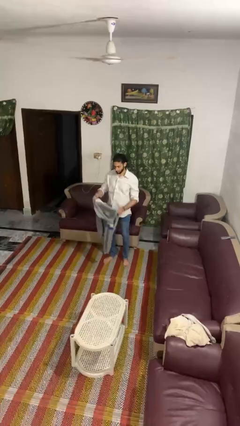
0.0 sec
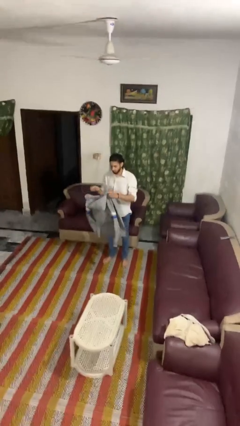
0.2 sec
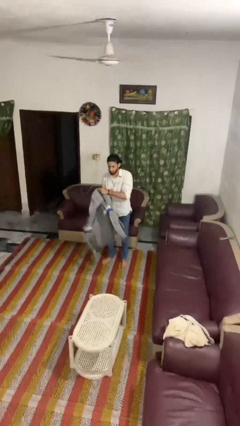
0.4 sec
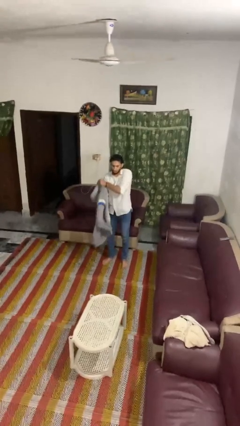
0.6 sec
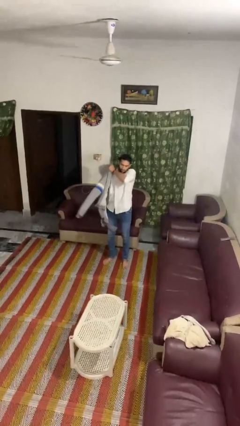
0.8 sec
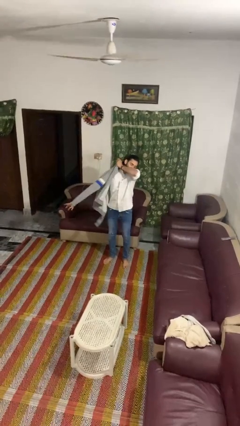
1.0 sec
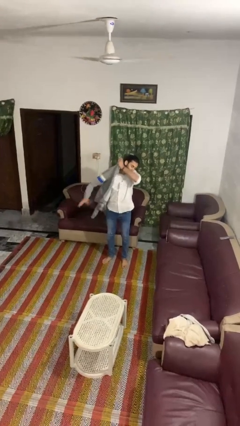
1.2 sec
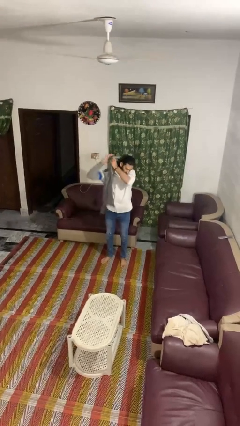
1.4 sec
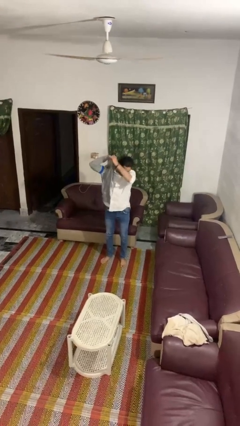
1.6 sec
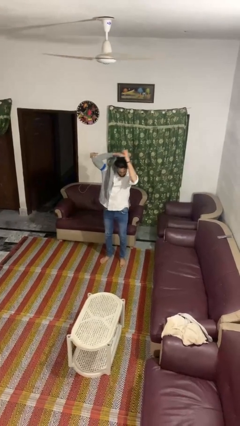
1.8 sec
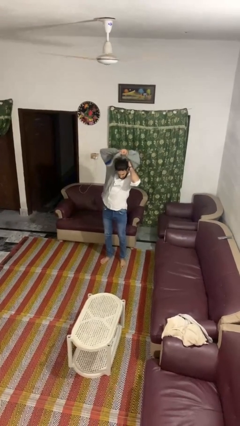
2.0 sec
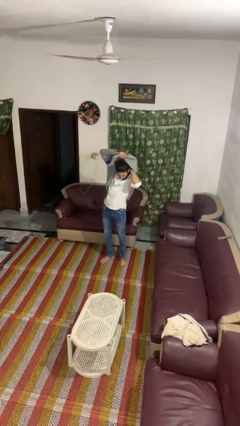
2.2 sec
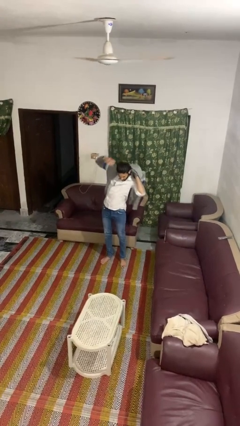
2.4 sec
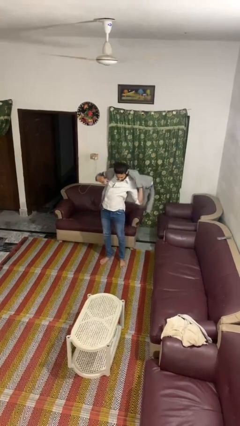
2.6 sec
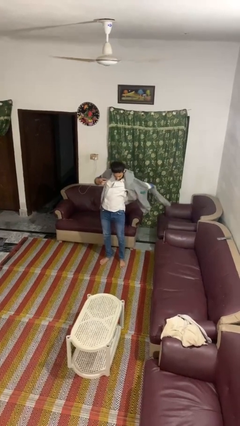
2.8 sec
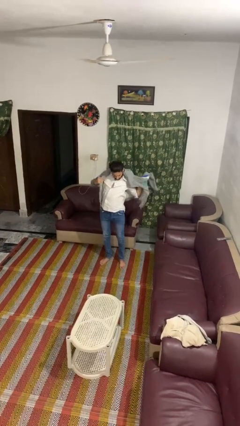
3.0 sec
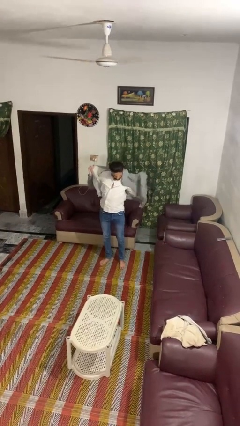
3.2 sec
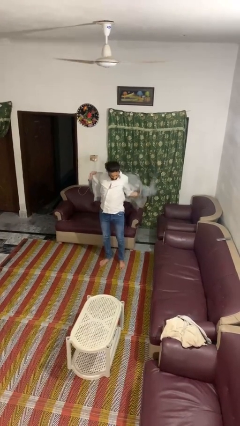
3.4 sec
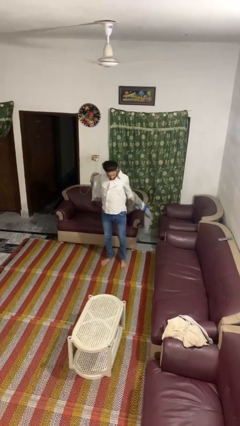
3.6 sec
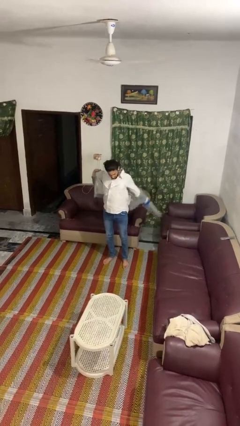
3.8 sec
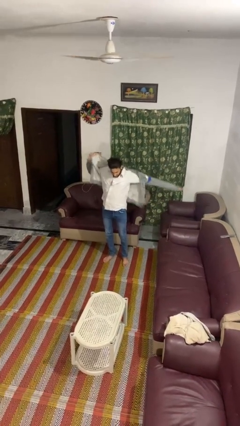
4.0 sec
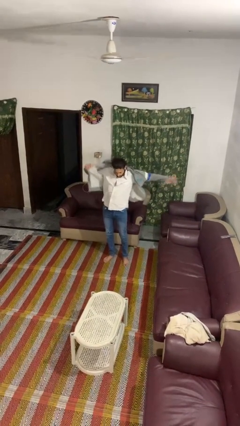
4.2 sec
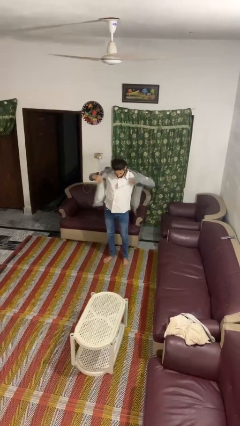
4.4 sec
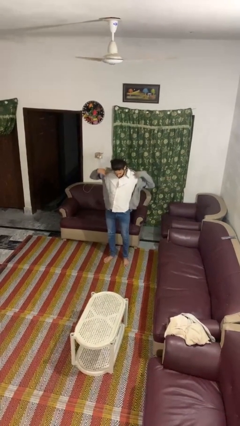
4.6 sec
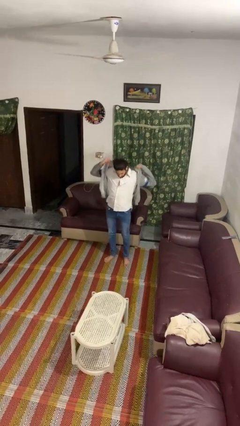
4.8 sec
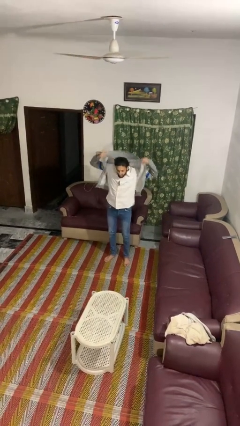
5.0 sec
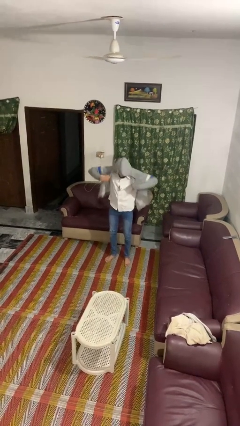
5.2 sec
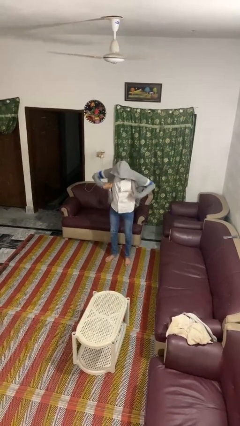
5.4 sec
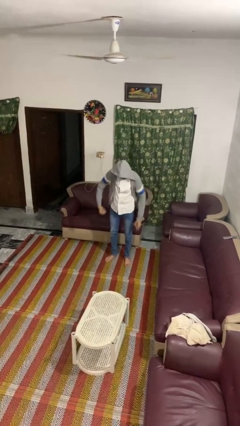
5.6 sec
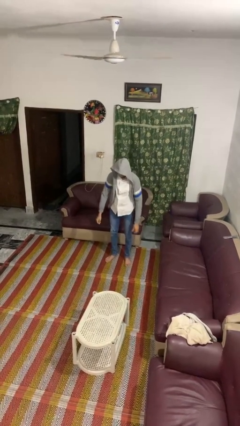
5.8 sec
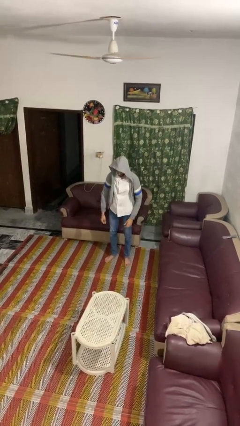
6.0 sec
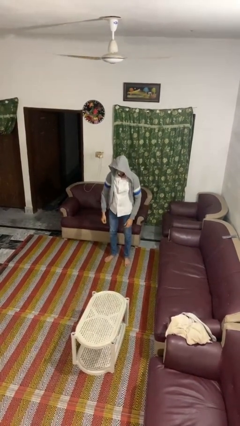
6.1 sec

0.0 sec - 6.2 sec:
person puts on hoodie

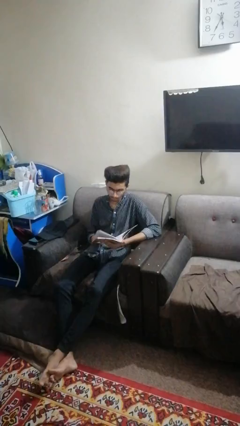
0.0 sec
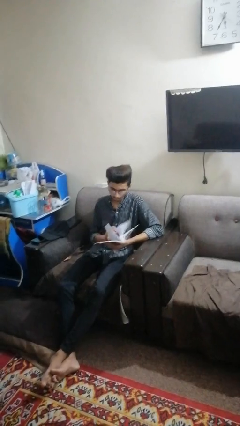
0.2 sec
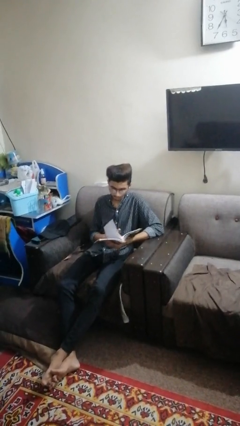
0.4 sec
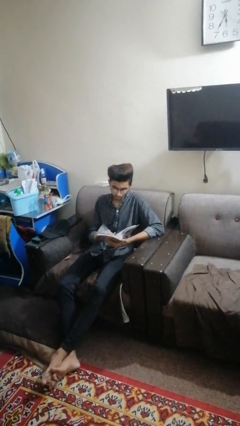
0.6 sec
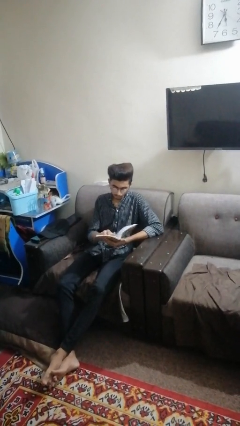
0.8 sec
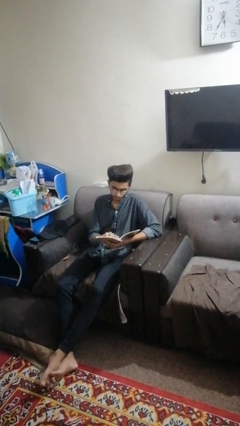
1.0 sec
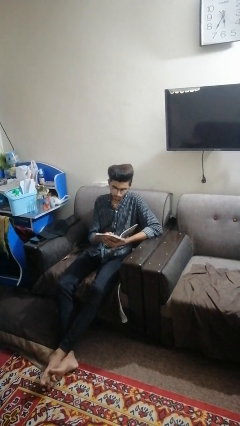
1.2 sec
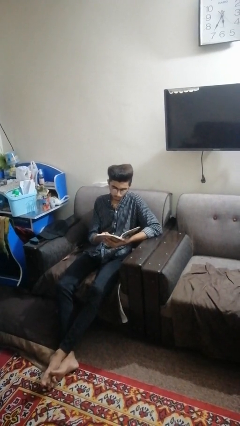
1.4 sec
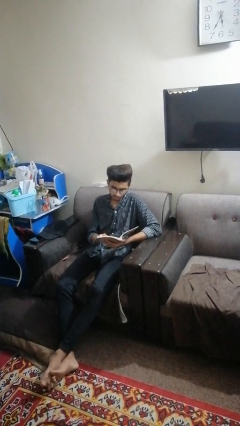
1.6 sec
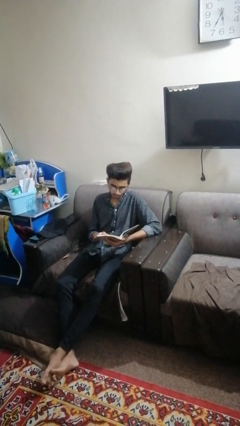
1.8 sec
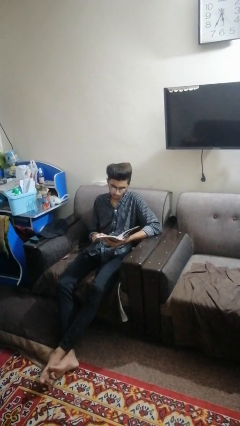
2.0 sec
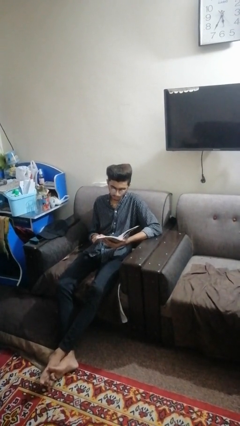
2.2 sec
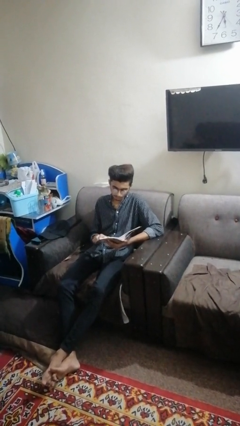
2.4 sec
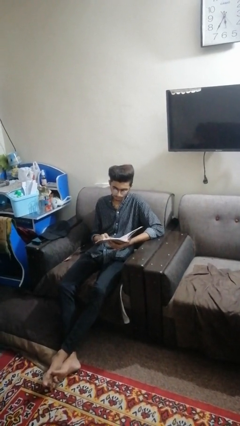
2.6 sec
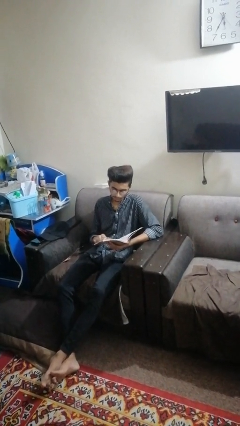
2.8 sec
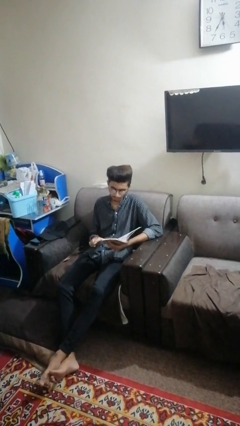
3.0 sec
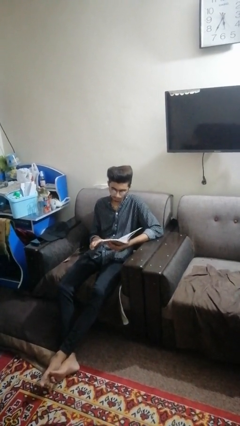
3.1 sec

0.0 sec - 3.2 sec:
person reads book

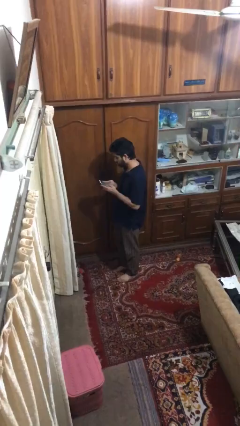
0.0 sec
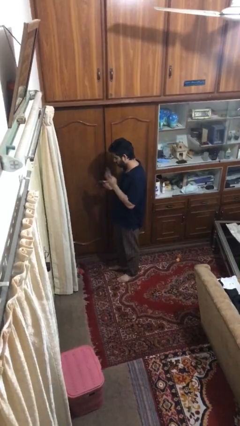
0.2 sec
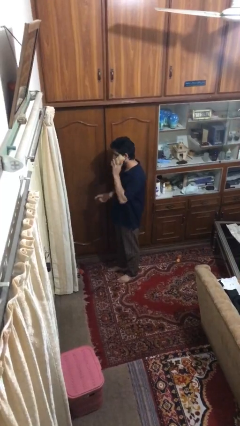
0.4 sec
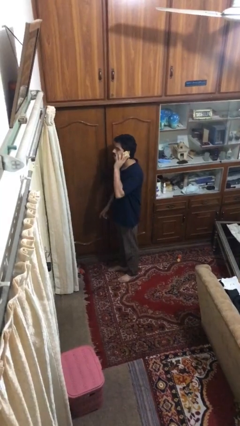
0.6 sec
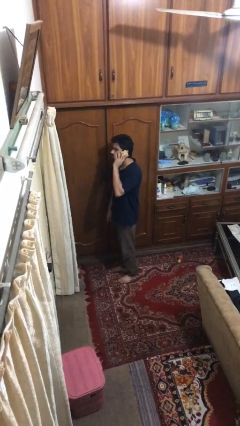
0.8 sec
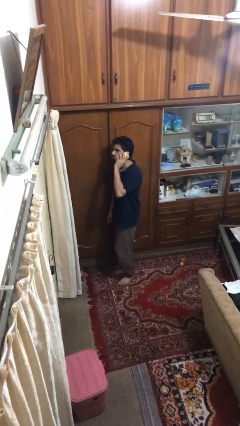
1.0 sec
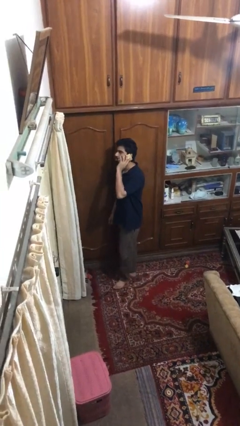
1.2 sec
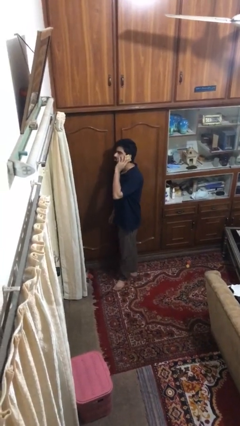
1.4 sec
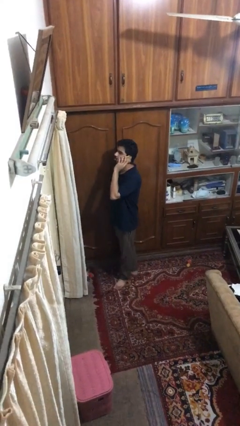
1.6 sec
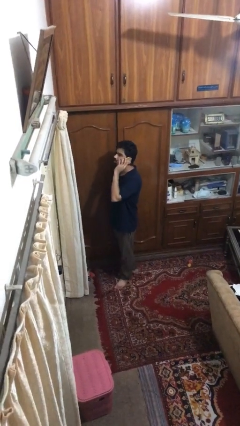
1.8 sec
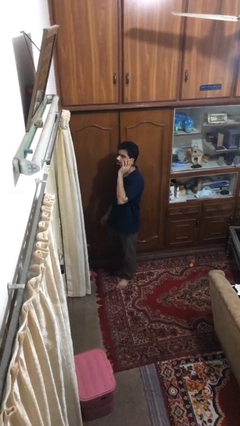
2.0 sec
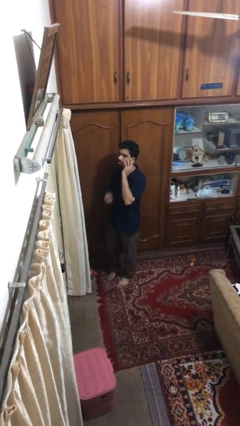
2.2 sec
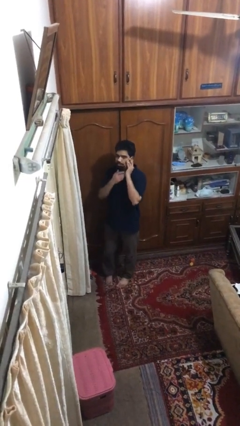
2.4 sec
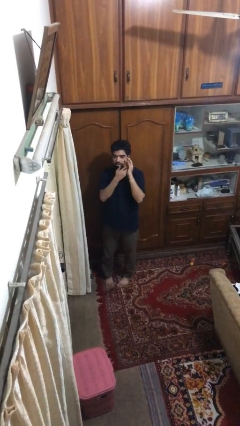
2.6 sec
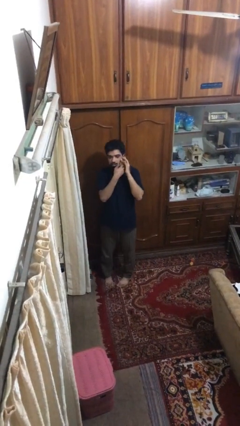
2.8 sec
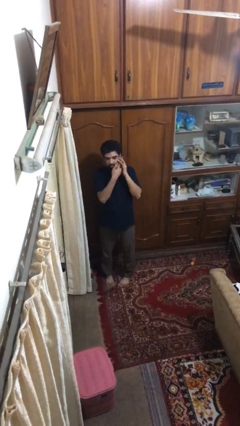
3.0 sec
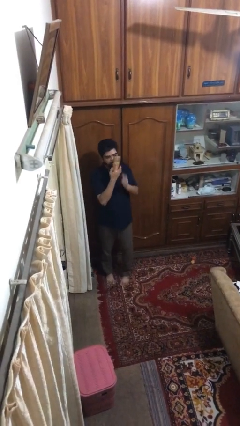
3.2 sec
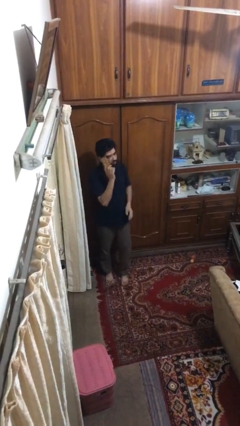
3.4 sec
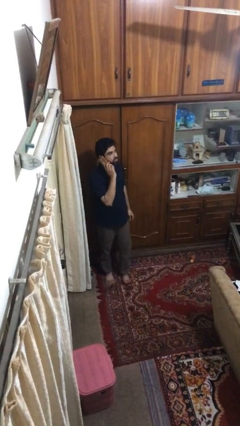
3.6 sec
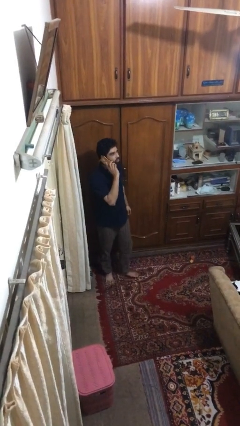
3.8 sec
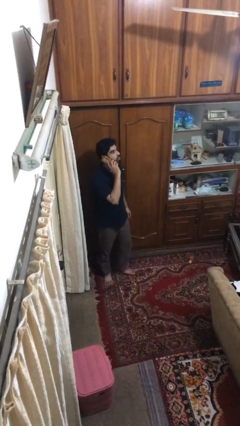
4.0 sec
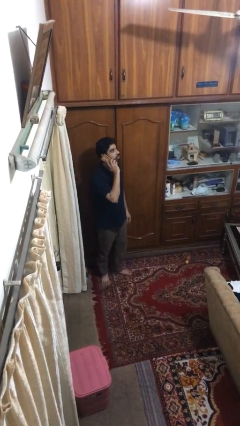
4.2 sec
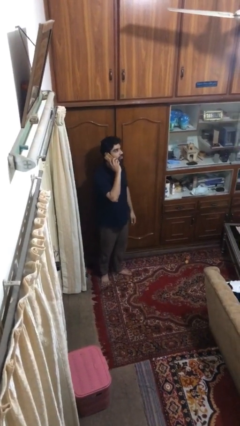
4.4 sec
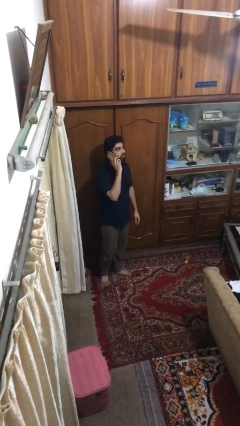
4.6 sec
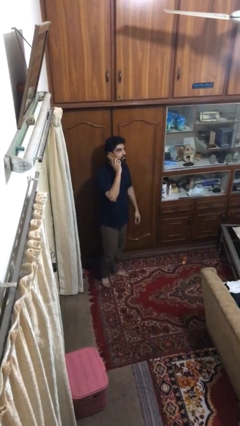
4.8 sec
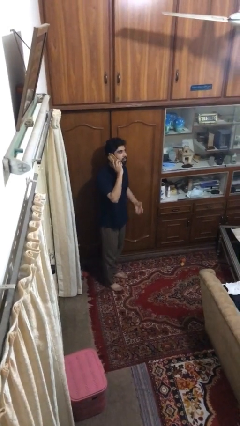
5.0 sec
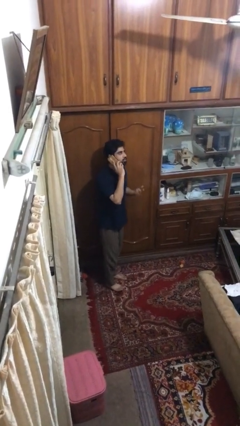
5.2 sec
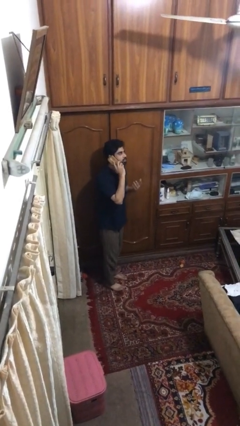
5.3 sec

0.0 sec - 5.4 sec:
person talks on phone

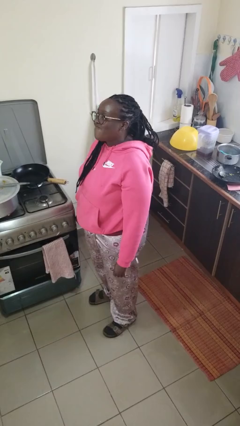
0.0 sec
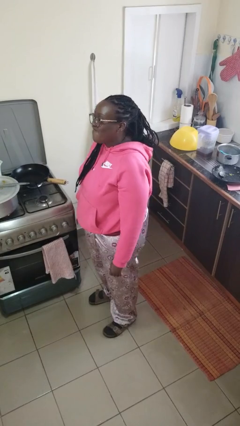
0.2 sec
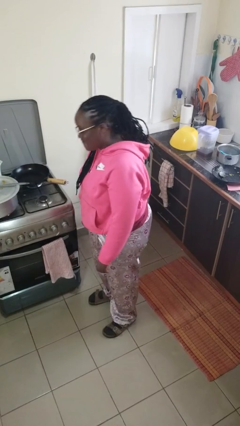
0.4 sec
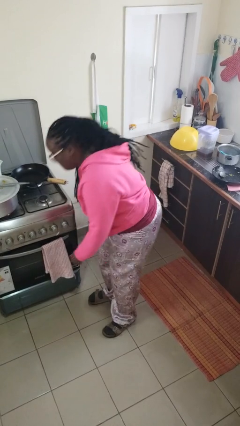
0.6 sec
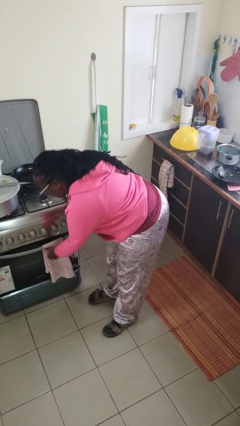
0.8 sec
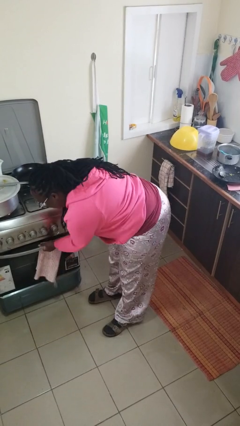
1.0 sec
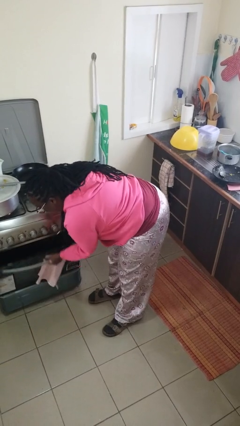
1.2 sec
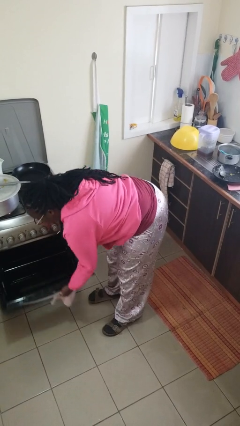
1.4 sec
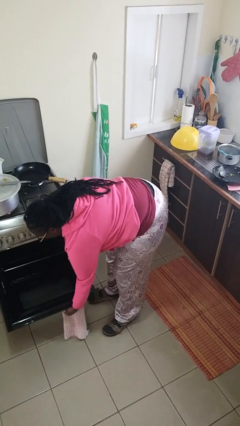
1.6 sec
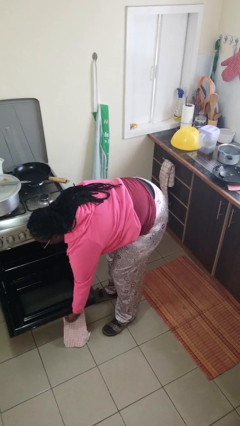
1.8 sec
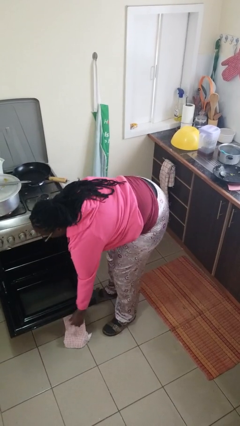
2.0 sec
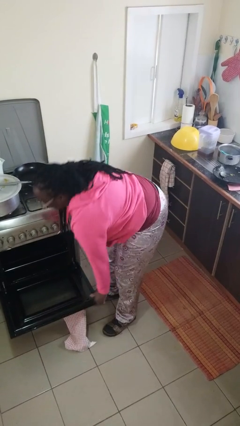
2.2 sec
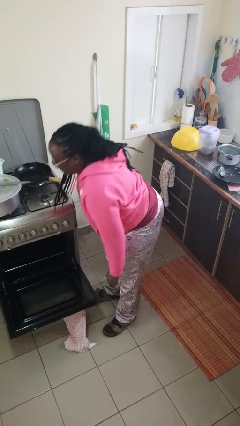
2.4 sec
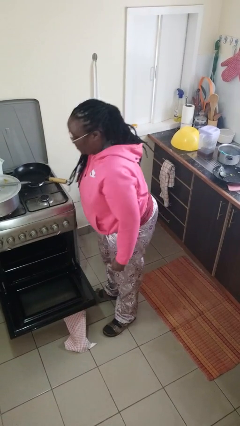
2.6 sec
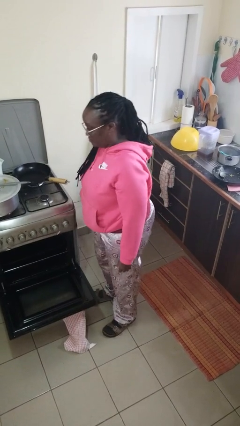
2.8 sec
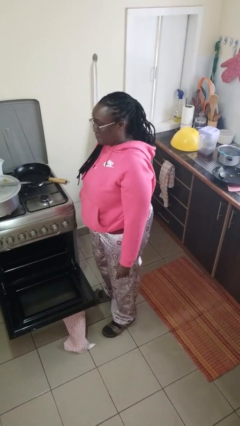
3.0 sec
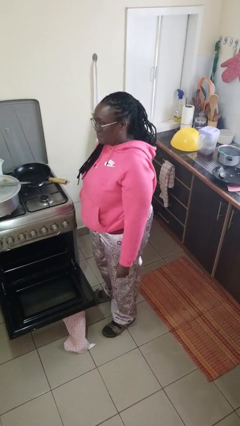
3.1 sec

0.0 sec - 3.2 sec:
person opens oven door
